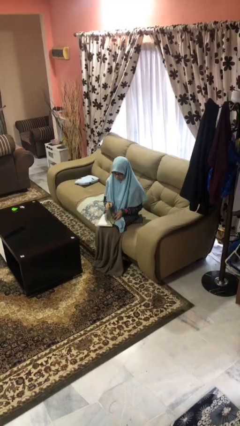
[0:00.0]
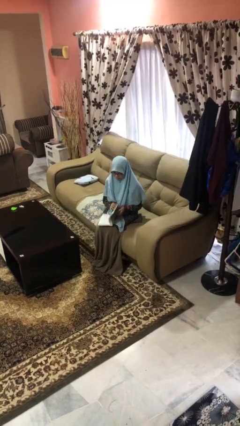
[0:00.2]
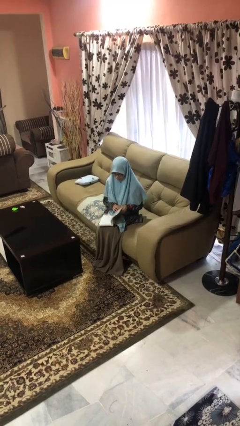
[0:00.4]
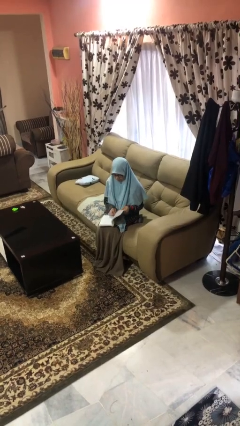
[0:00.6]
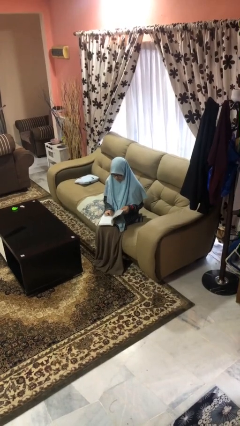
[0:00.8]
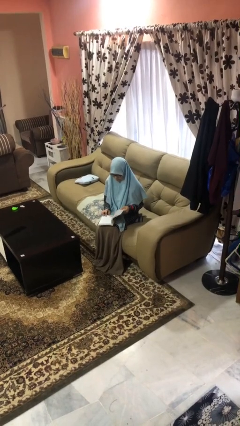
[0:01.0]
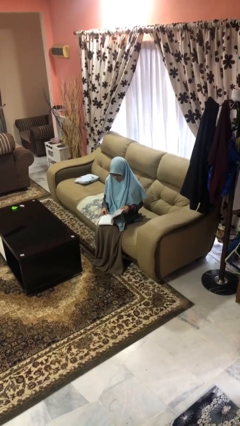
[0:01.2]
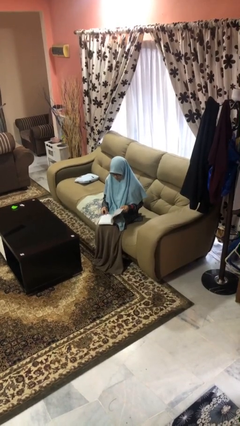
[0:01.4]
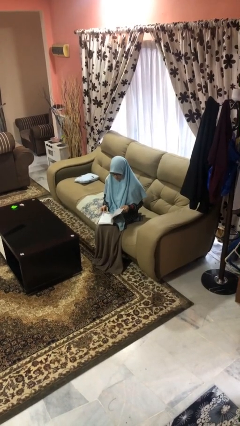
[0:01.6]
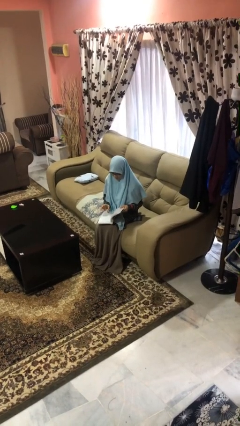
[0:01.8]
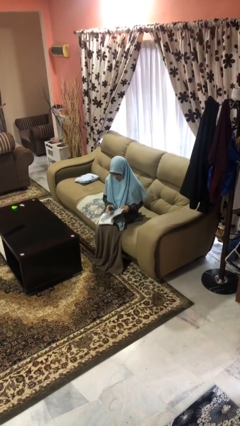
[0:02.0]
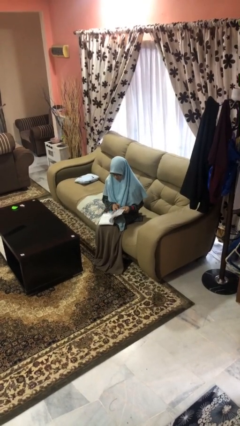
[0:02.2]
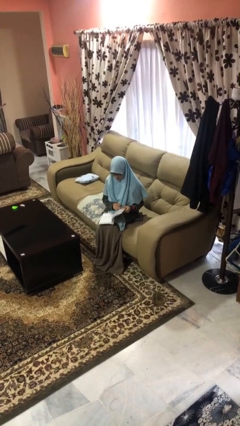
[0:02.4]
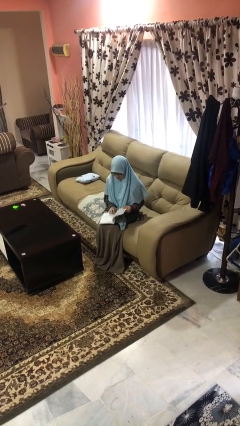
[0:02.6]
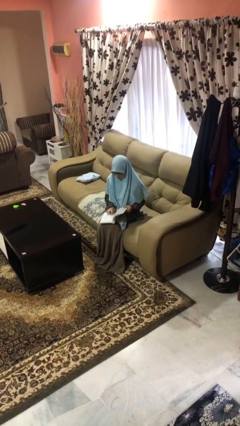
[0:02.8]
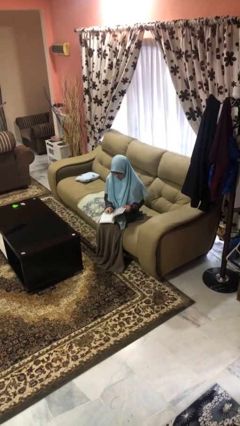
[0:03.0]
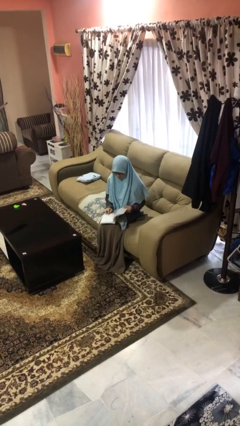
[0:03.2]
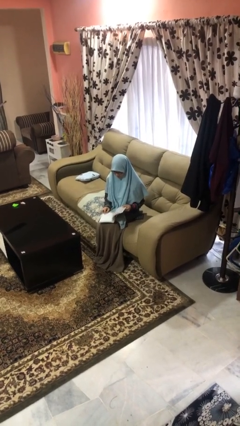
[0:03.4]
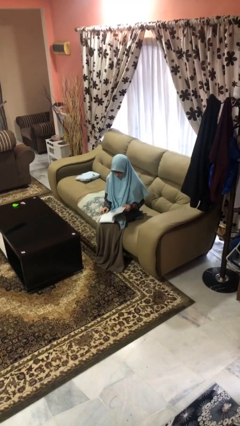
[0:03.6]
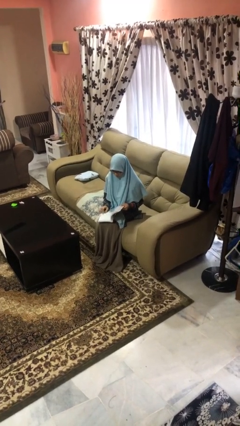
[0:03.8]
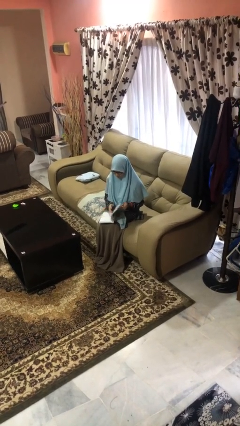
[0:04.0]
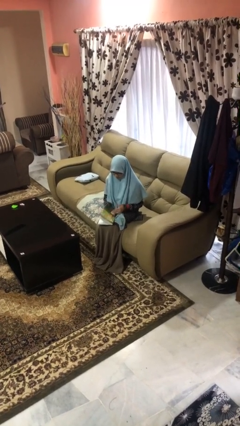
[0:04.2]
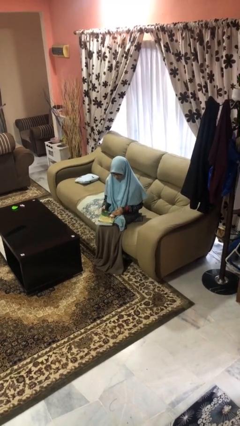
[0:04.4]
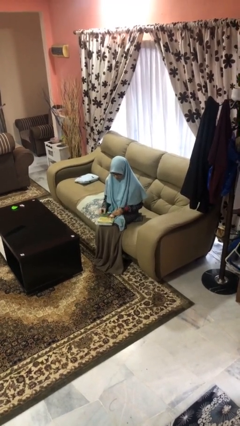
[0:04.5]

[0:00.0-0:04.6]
person reads book

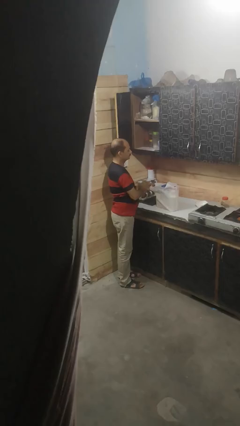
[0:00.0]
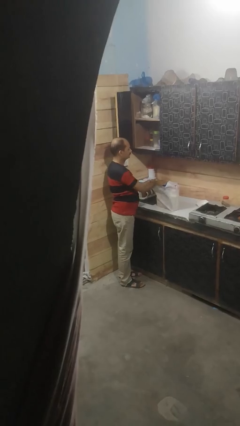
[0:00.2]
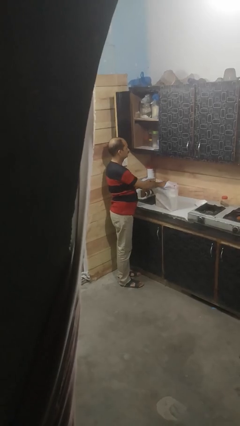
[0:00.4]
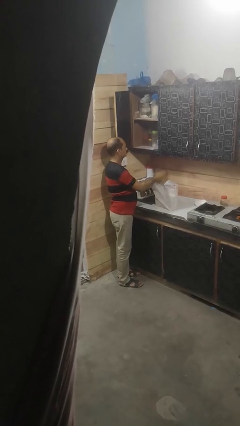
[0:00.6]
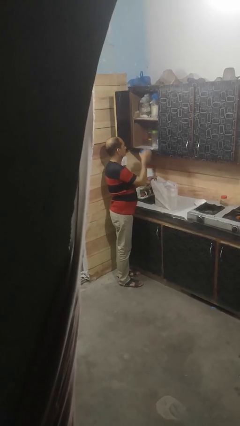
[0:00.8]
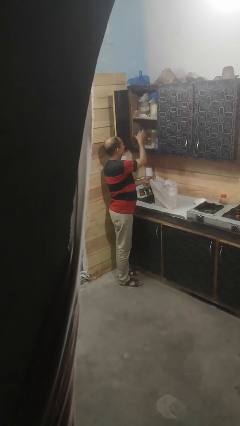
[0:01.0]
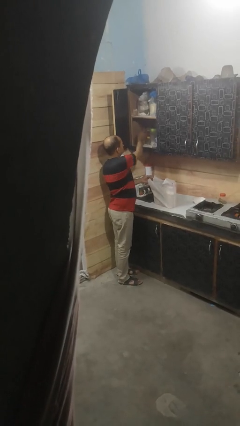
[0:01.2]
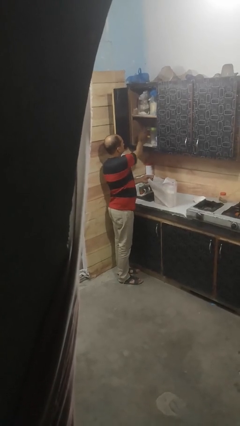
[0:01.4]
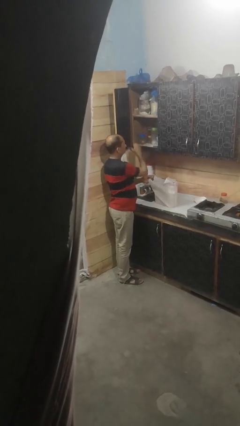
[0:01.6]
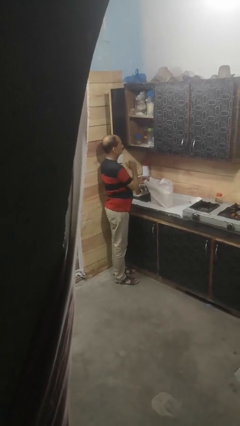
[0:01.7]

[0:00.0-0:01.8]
person loads groceries into cabinet

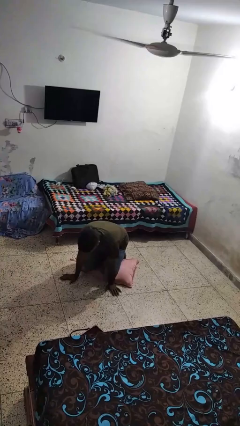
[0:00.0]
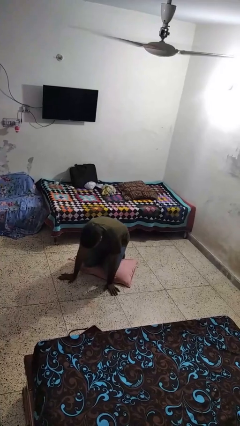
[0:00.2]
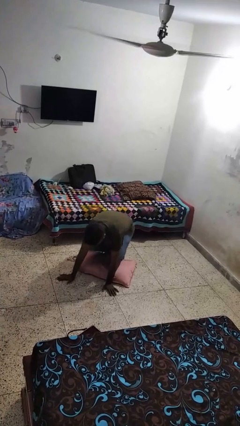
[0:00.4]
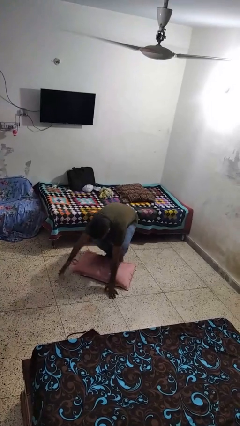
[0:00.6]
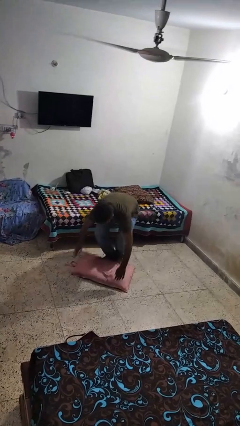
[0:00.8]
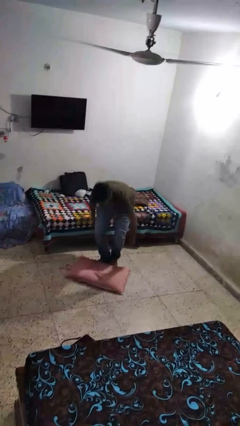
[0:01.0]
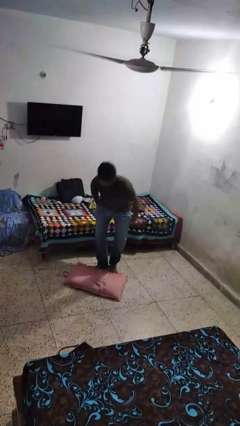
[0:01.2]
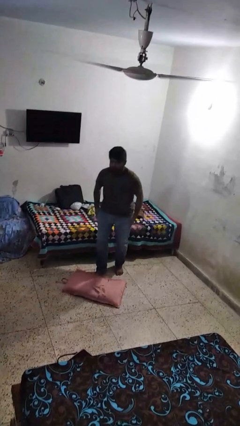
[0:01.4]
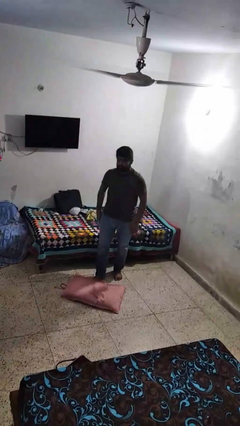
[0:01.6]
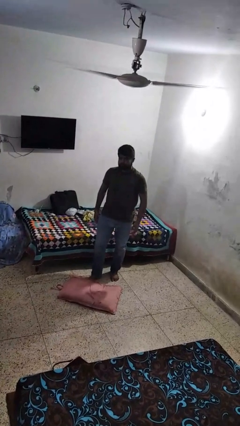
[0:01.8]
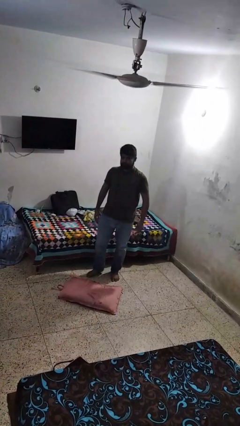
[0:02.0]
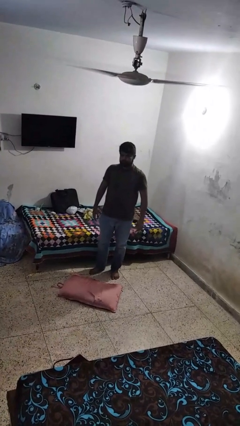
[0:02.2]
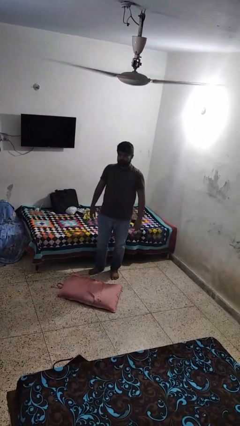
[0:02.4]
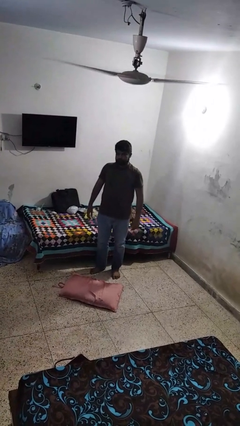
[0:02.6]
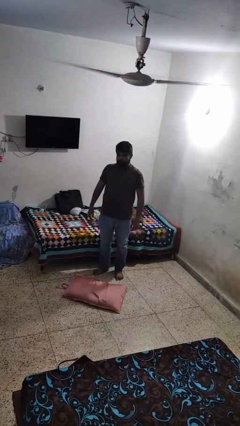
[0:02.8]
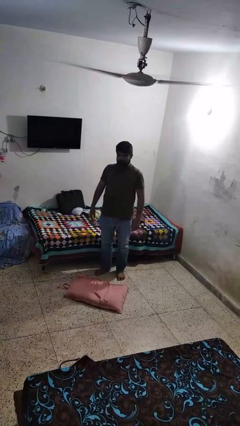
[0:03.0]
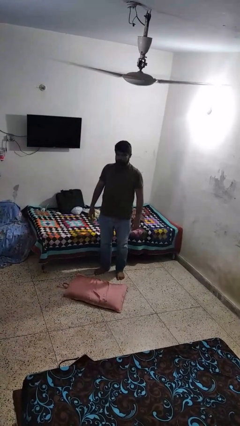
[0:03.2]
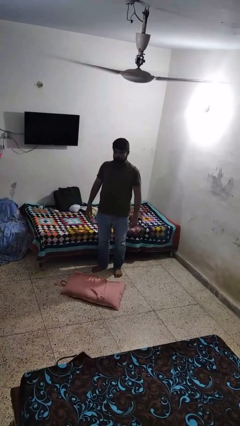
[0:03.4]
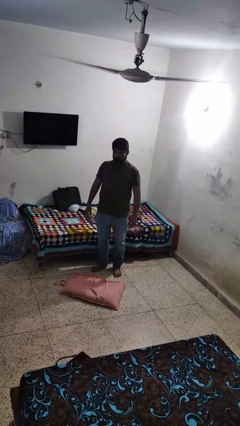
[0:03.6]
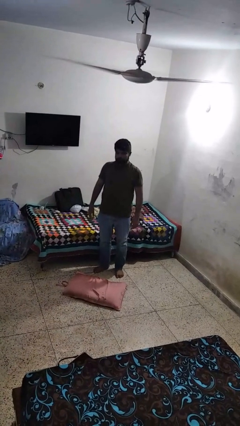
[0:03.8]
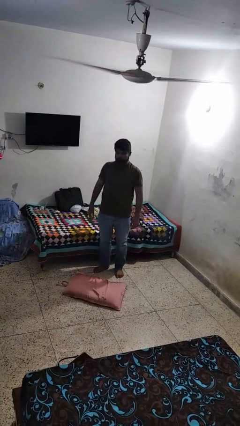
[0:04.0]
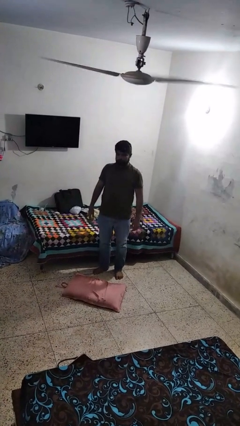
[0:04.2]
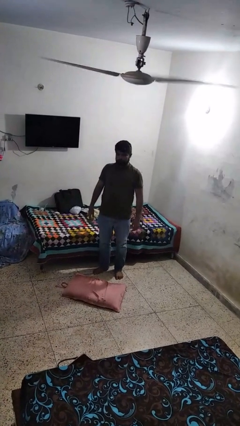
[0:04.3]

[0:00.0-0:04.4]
person stands up from floor

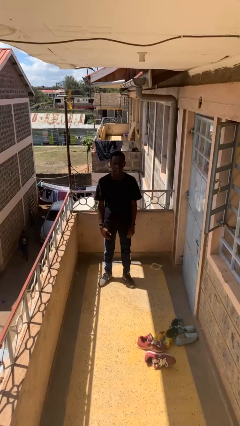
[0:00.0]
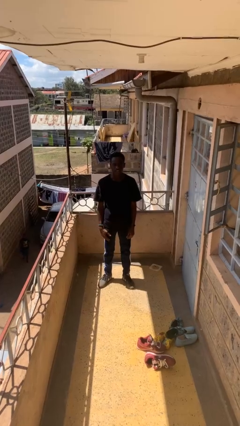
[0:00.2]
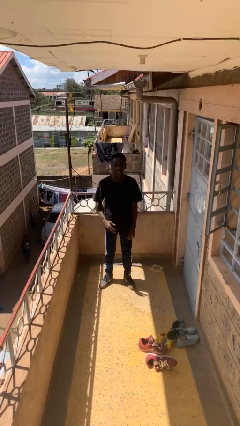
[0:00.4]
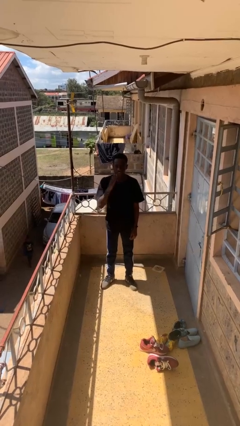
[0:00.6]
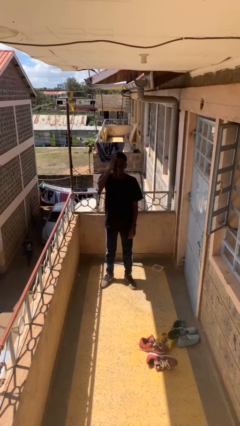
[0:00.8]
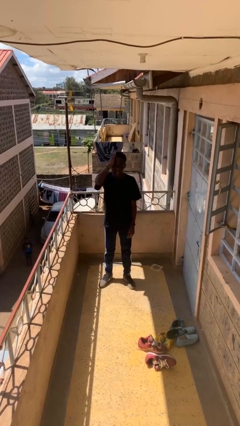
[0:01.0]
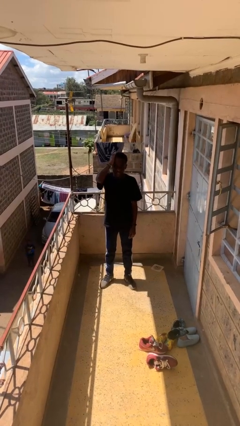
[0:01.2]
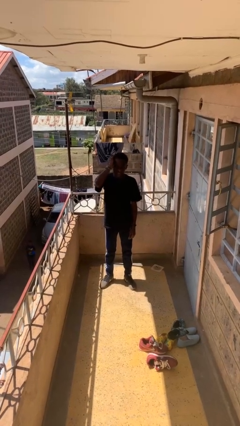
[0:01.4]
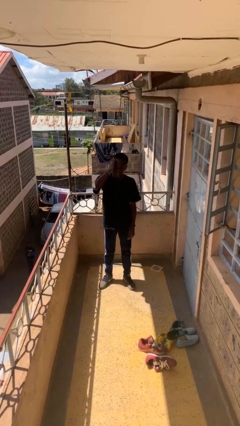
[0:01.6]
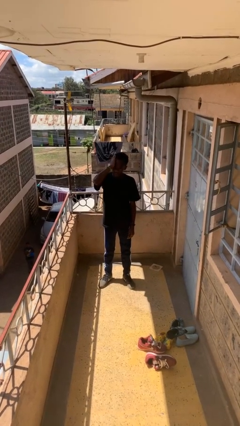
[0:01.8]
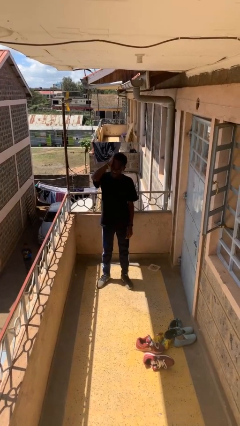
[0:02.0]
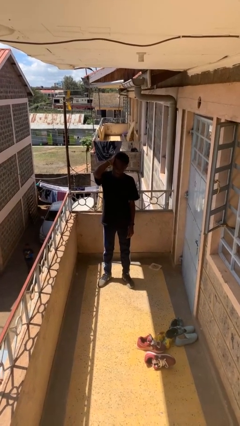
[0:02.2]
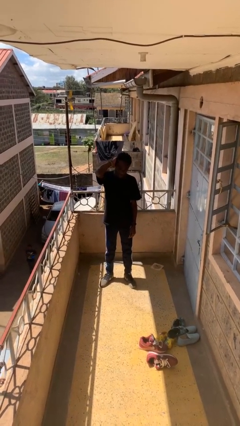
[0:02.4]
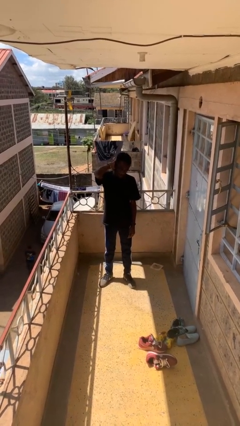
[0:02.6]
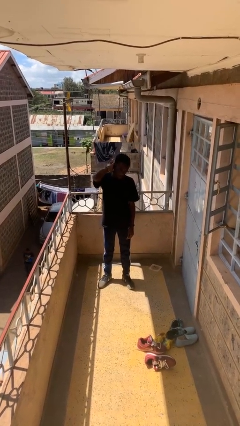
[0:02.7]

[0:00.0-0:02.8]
person strokes hair

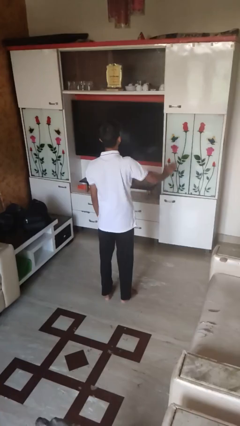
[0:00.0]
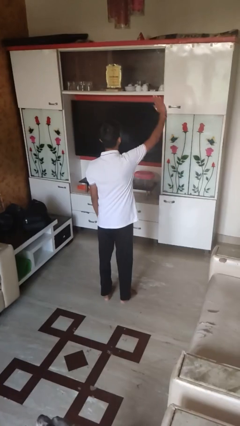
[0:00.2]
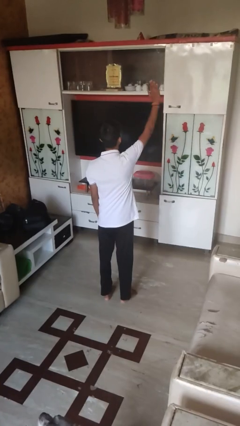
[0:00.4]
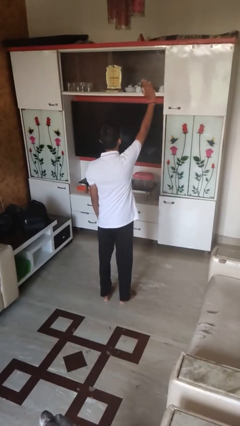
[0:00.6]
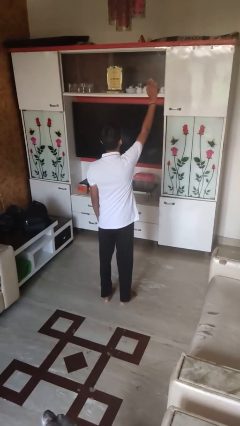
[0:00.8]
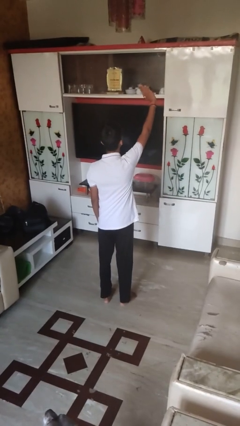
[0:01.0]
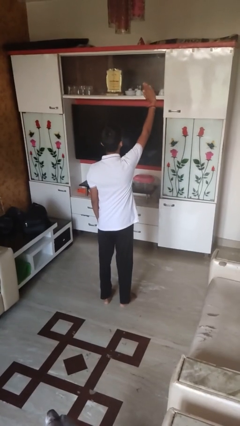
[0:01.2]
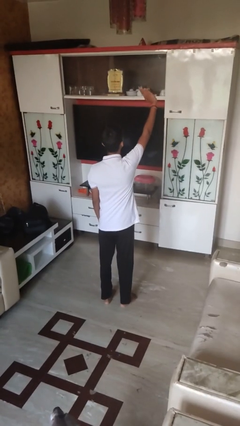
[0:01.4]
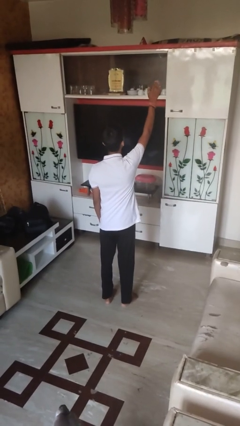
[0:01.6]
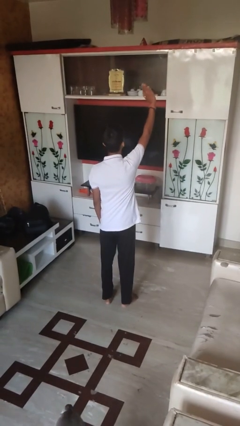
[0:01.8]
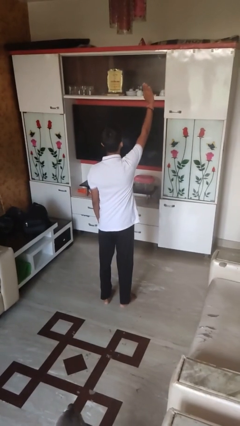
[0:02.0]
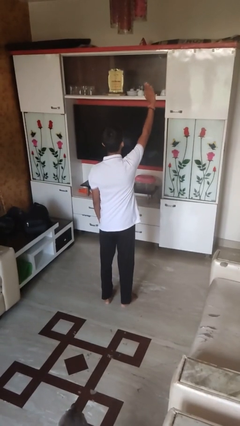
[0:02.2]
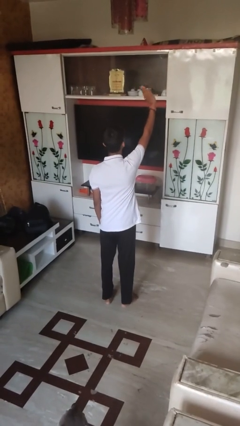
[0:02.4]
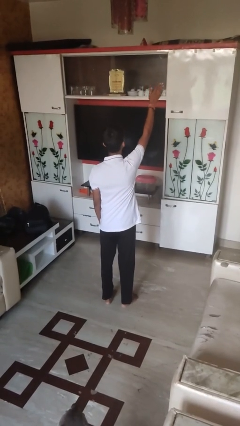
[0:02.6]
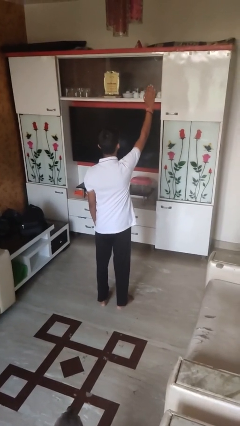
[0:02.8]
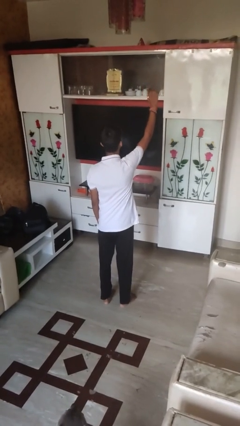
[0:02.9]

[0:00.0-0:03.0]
person waves at person

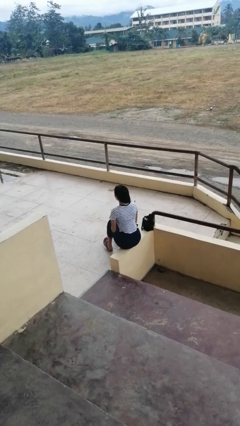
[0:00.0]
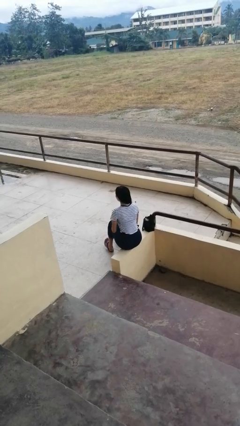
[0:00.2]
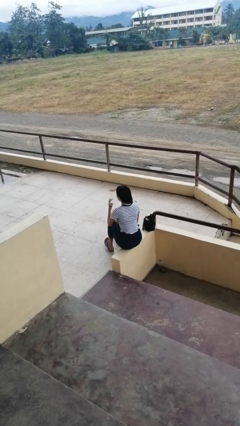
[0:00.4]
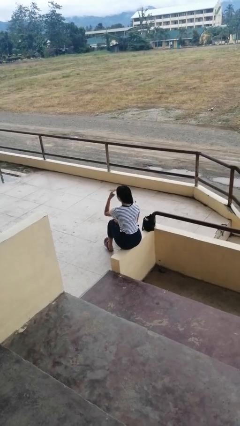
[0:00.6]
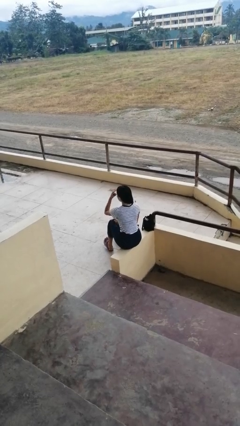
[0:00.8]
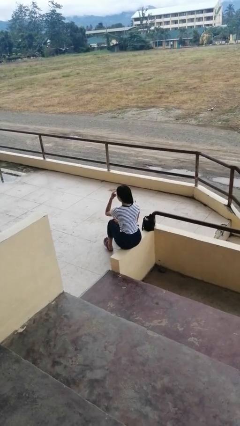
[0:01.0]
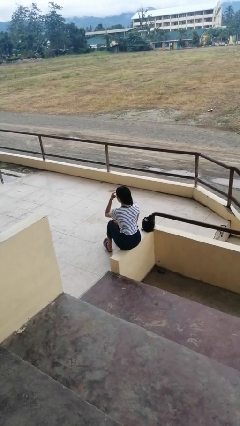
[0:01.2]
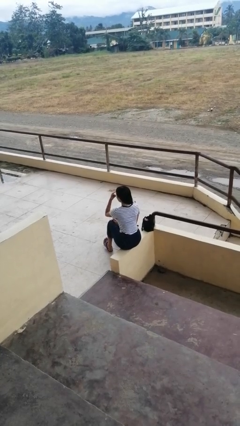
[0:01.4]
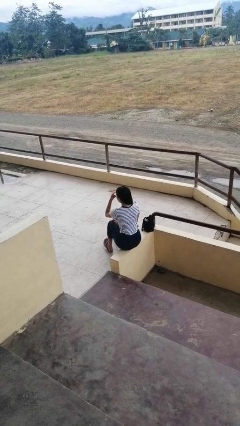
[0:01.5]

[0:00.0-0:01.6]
person gestures watch closely
